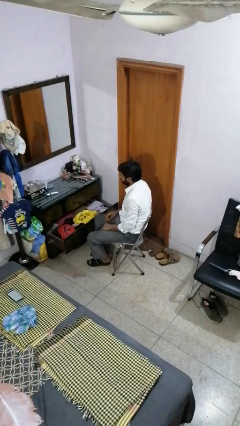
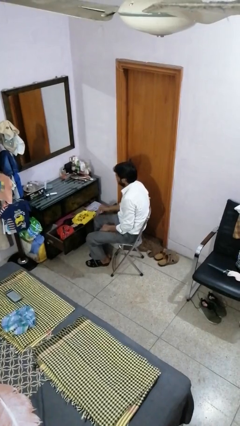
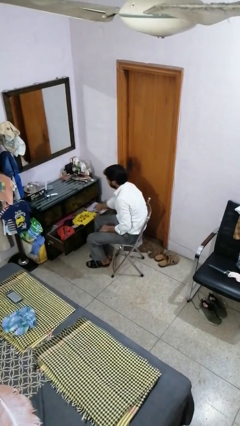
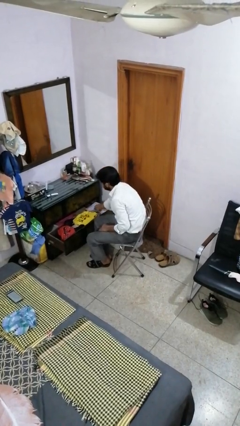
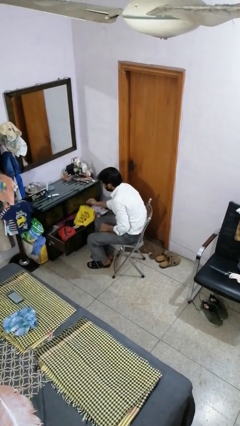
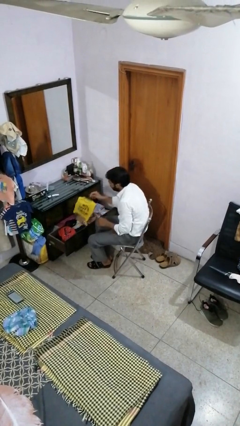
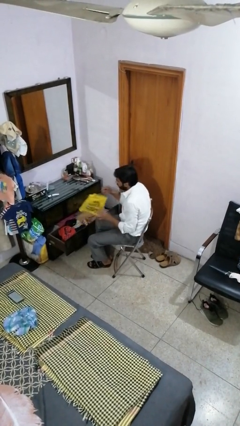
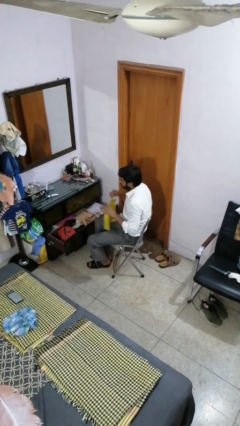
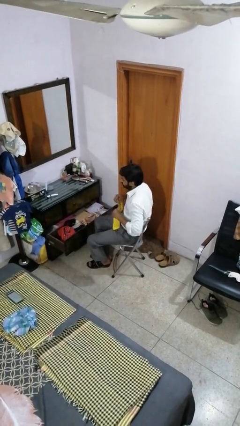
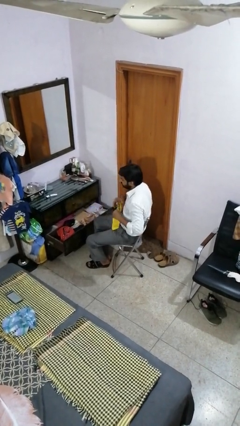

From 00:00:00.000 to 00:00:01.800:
person takes clothes from dresser

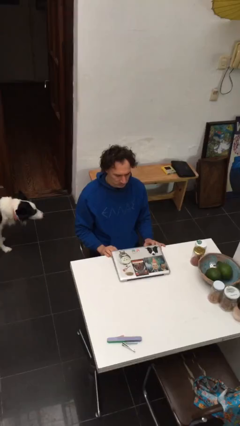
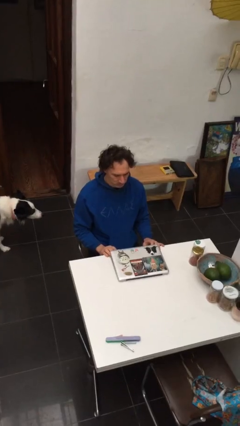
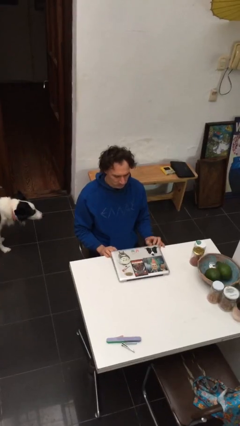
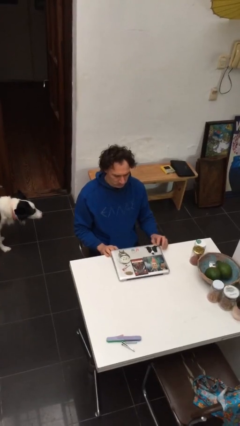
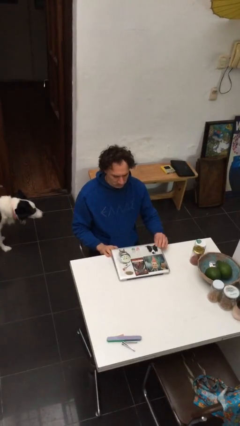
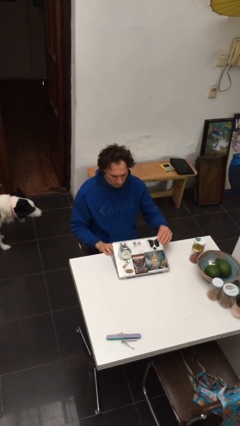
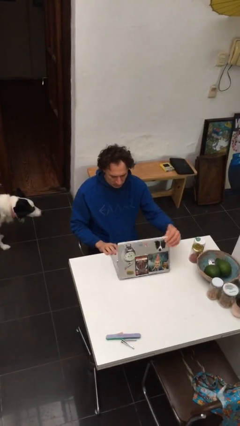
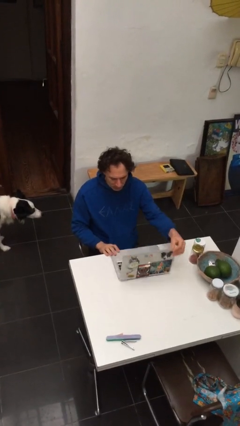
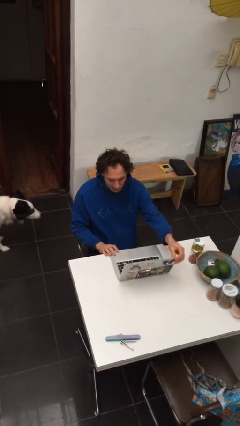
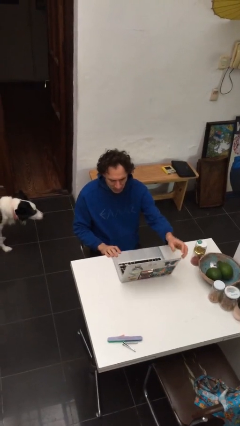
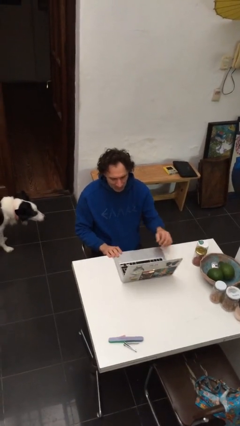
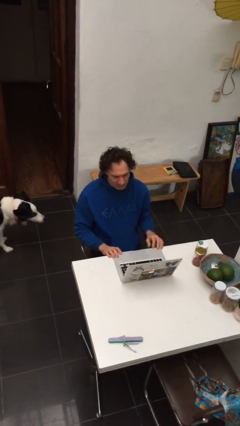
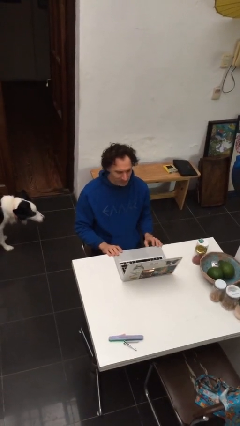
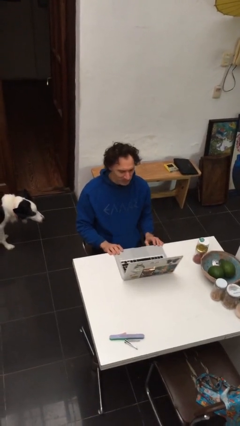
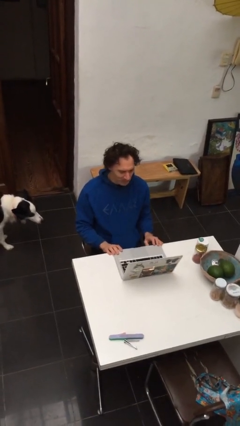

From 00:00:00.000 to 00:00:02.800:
person opens laptop

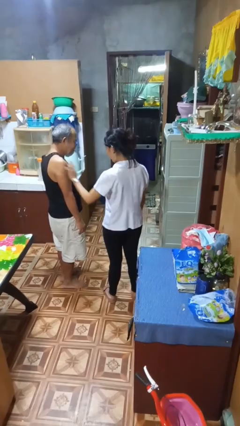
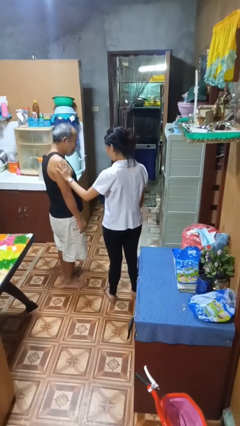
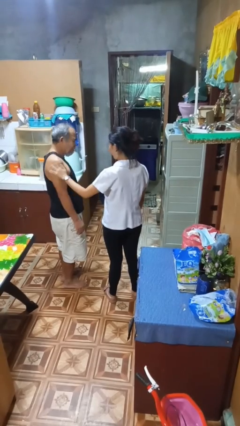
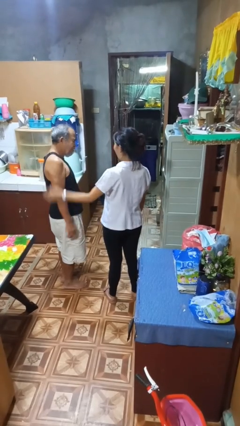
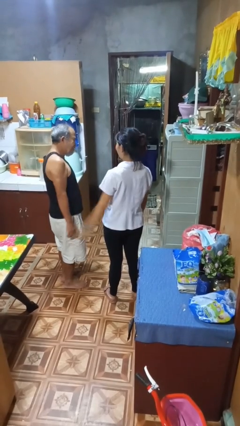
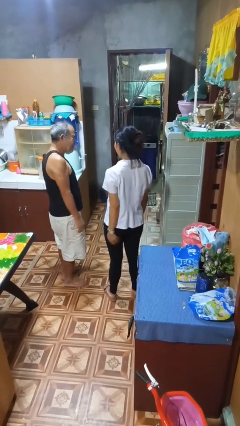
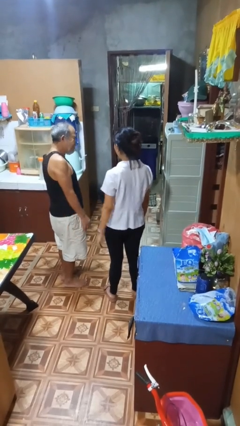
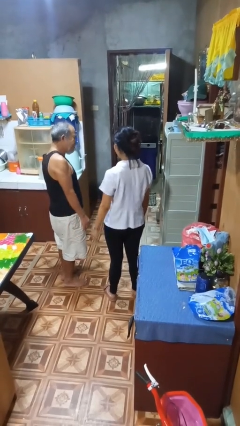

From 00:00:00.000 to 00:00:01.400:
person shoves person

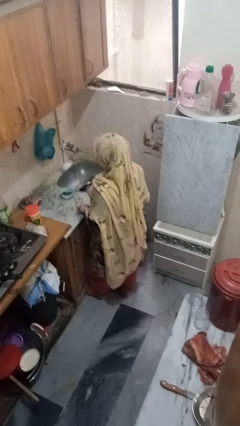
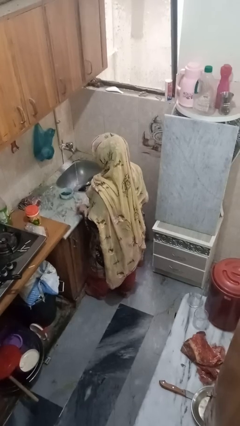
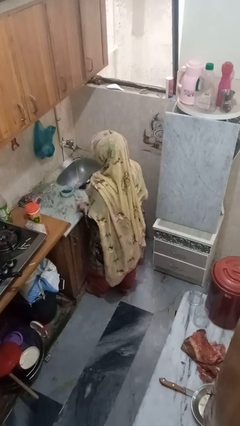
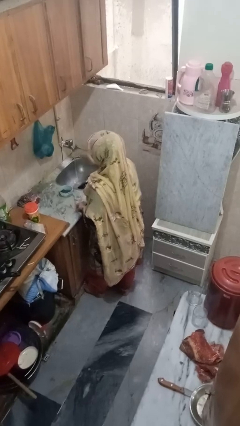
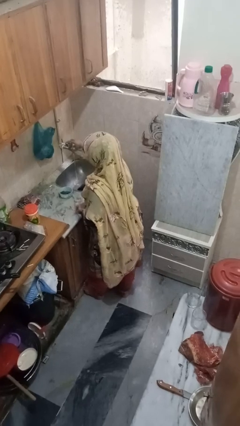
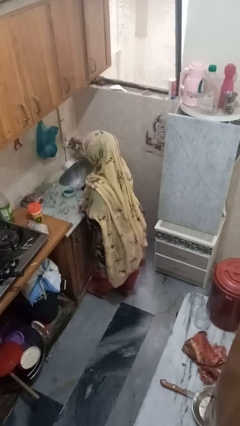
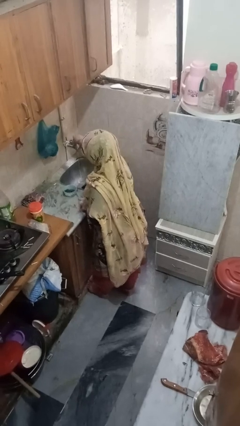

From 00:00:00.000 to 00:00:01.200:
person turns off faucet

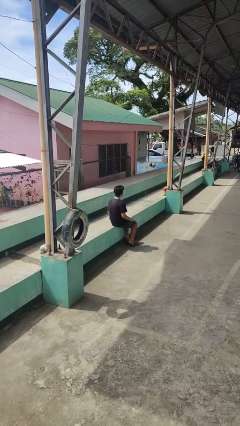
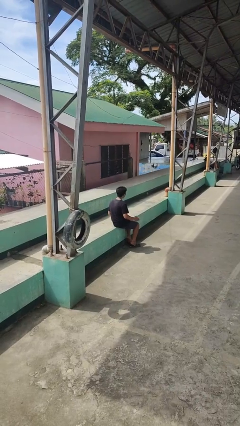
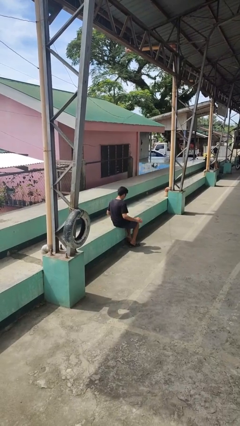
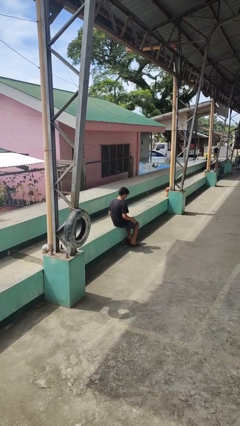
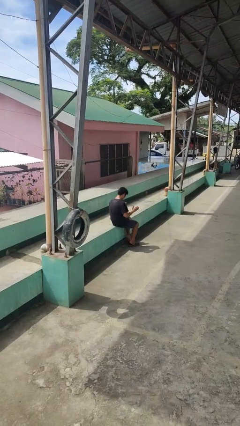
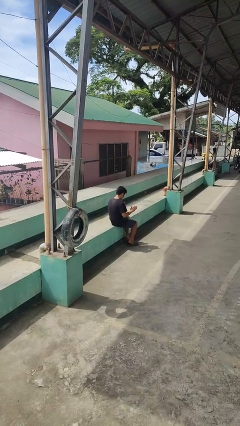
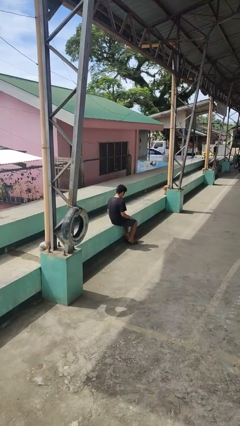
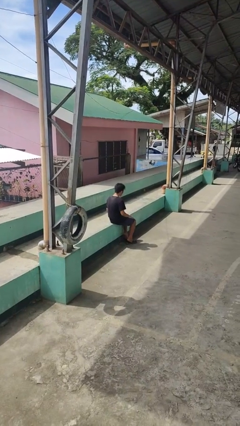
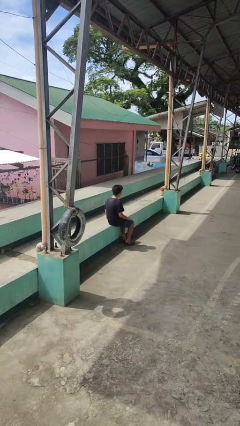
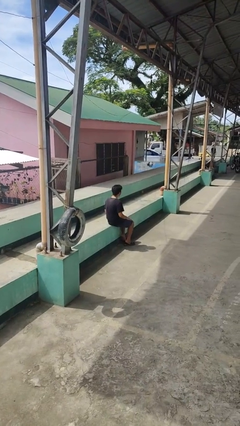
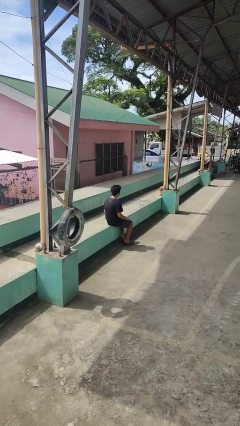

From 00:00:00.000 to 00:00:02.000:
person slaps hands on thighs

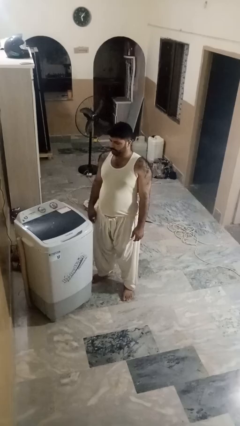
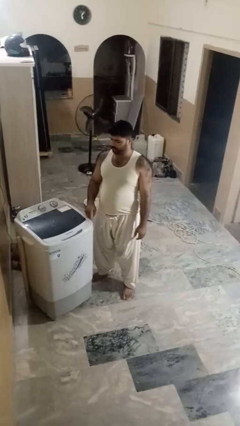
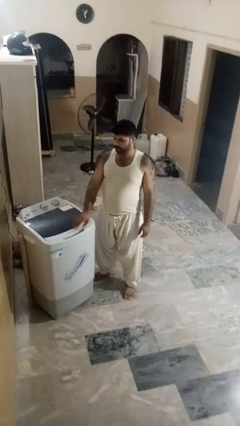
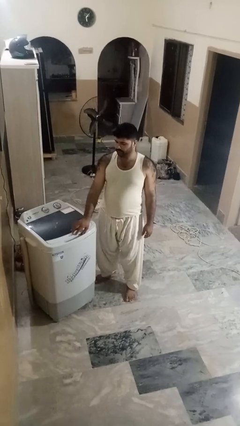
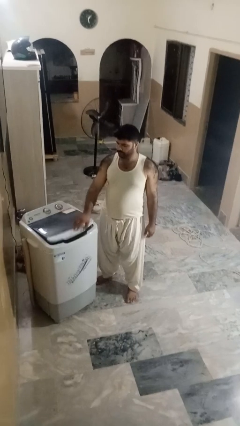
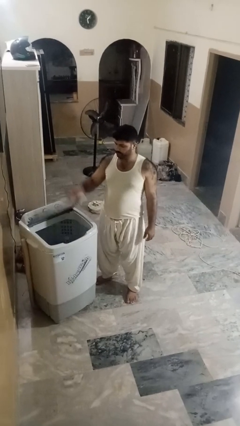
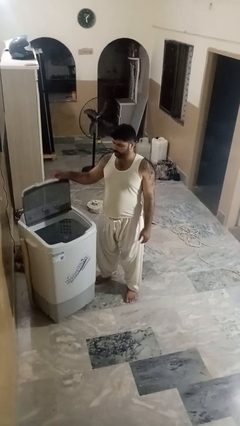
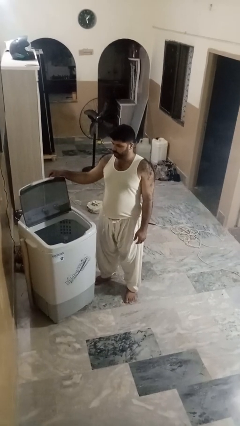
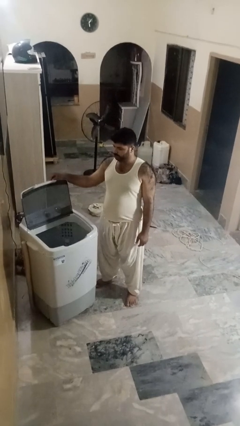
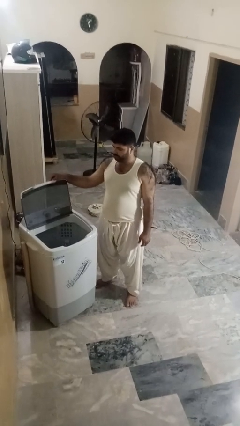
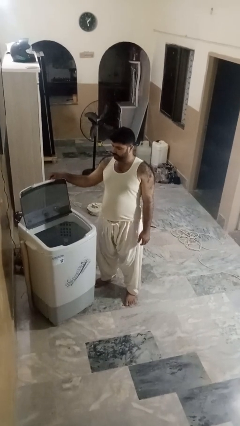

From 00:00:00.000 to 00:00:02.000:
person opens clothes washer

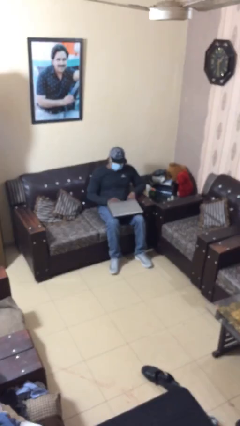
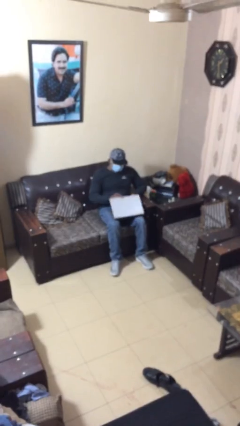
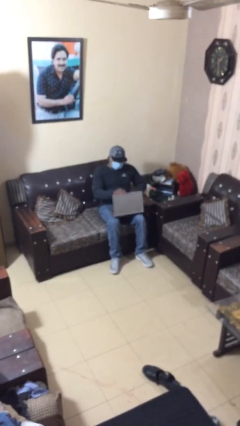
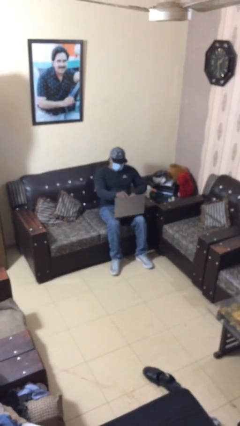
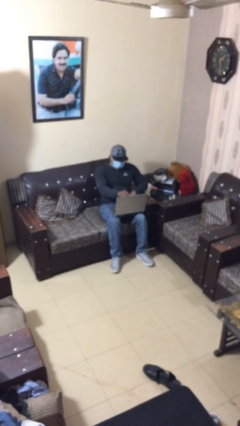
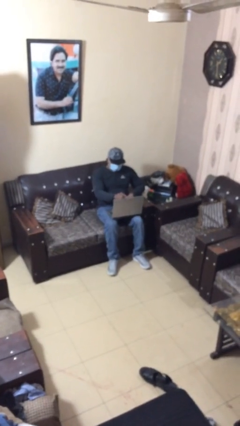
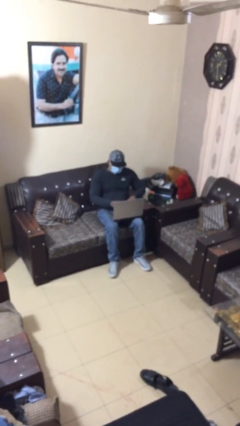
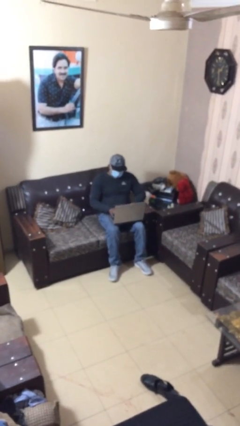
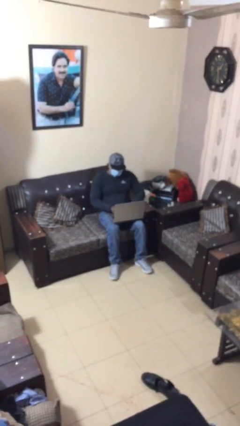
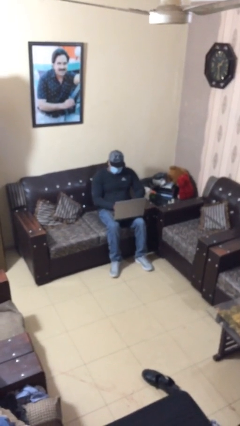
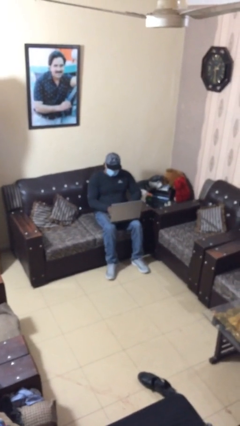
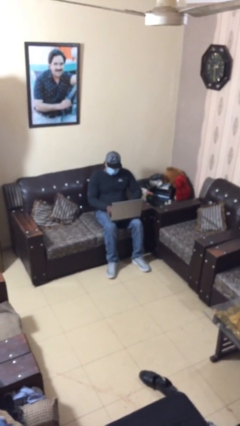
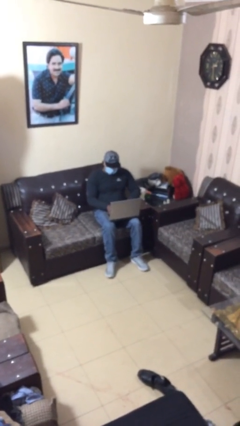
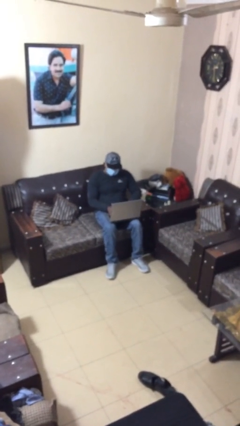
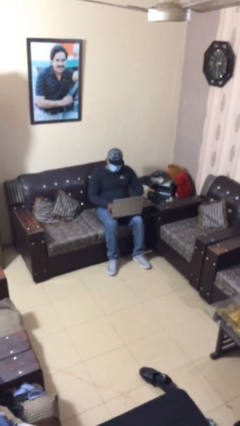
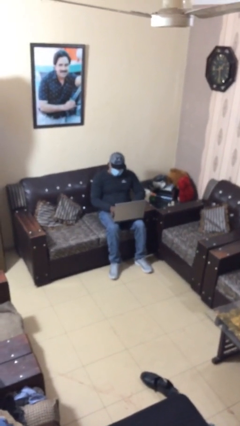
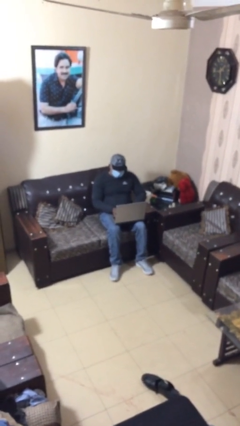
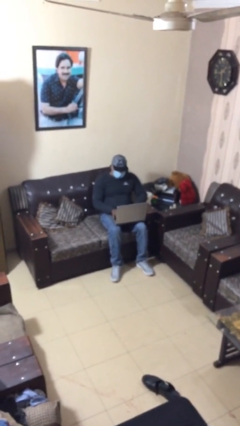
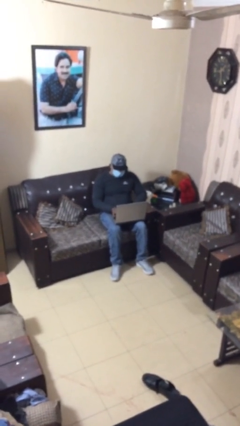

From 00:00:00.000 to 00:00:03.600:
person interacts with laptop

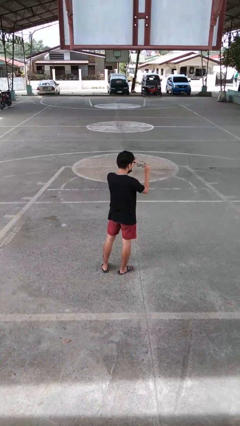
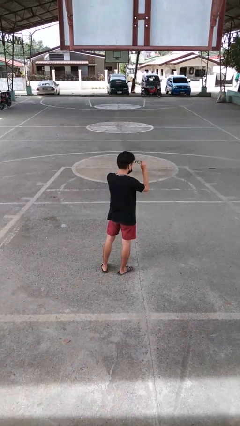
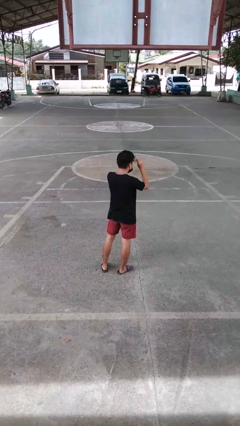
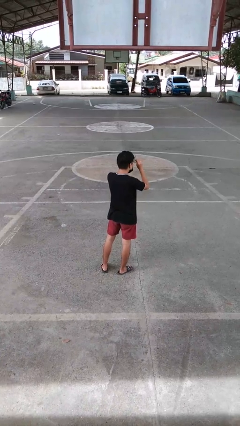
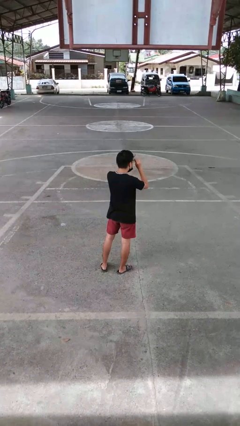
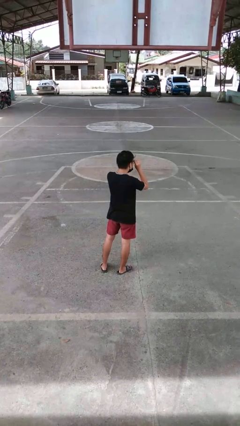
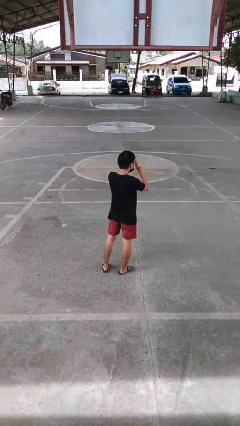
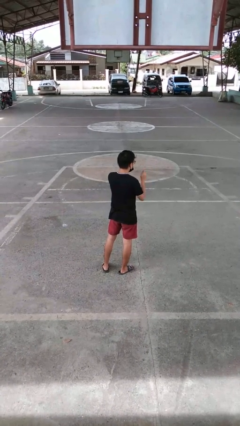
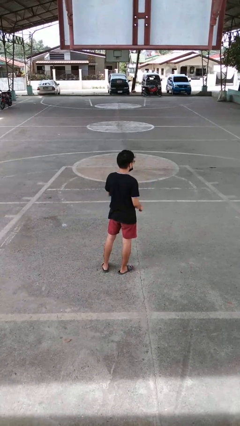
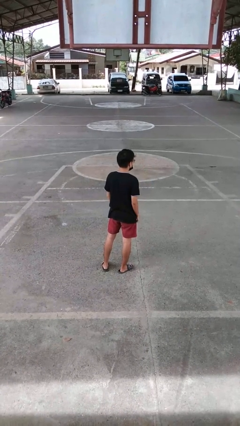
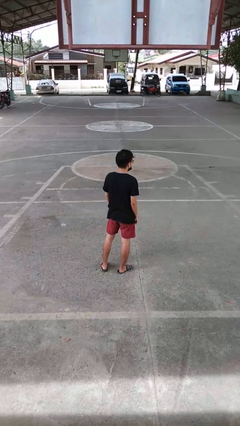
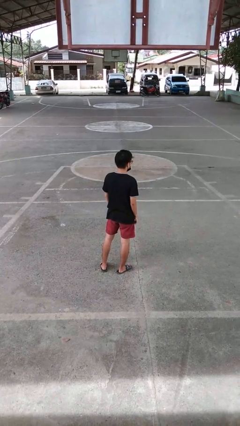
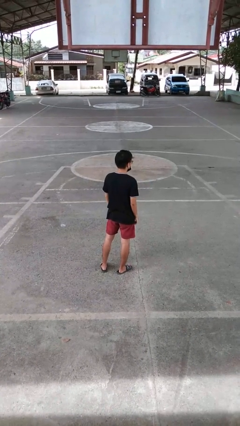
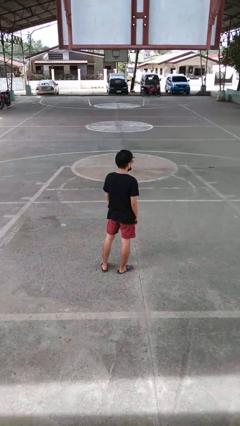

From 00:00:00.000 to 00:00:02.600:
person puts on glasses
